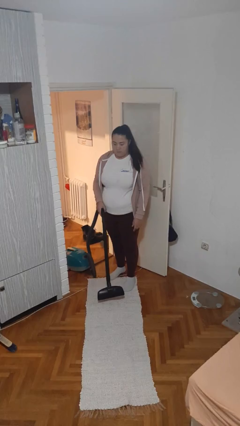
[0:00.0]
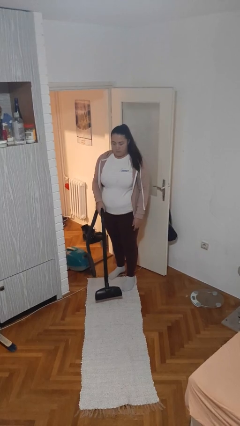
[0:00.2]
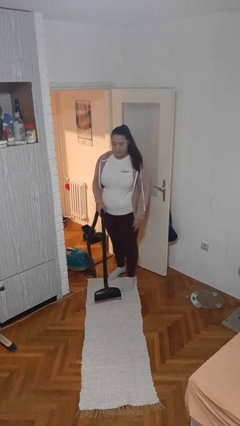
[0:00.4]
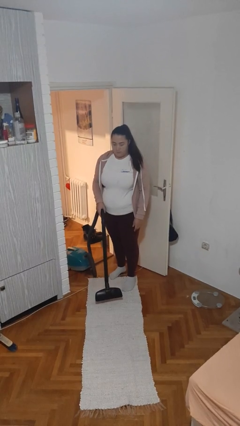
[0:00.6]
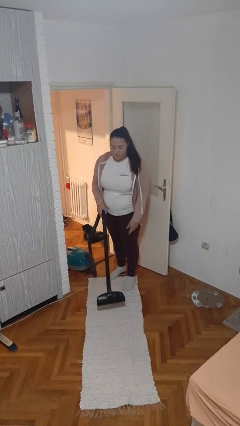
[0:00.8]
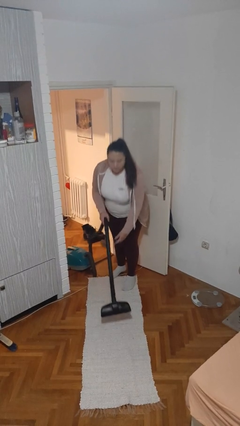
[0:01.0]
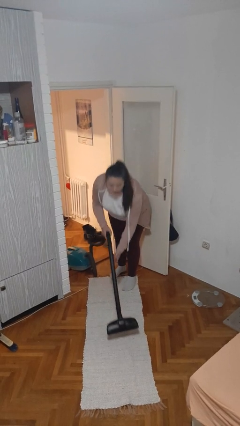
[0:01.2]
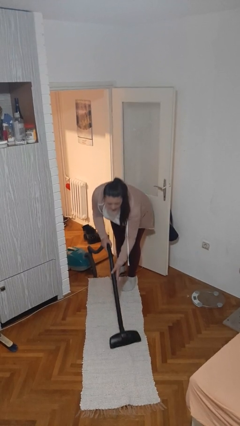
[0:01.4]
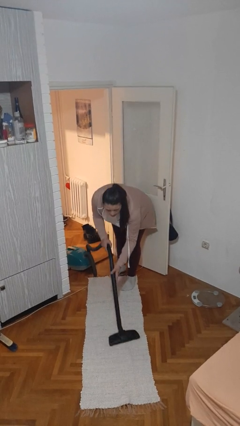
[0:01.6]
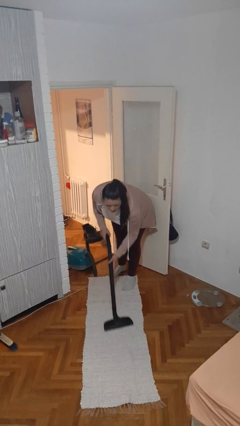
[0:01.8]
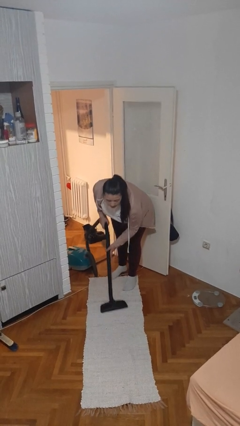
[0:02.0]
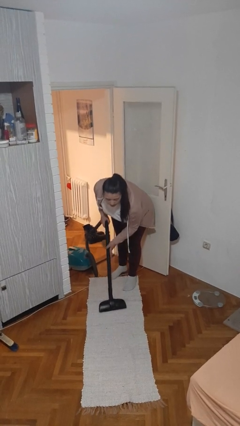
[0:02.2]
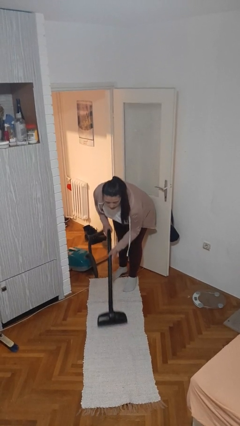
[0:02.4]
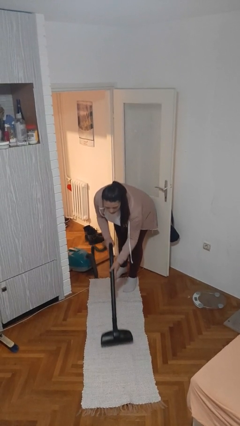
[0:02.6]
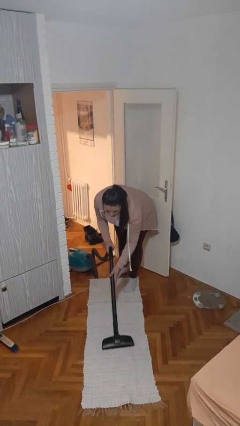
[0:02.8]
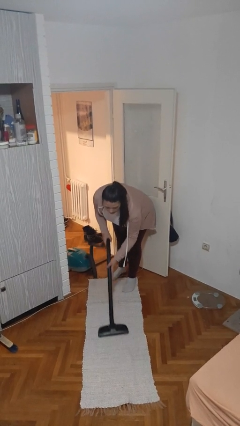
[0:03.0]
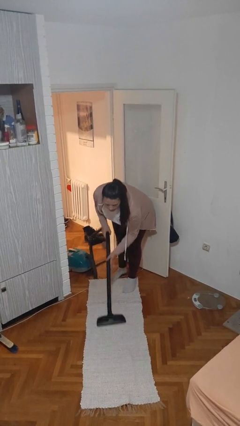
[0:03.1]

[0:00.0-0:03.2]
person vacuums carpet

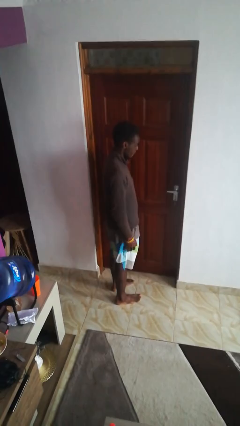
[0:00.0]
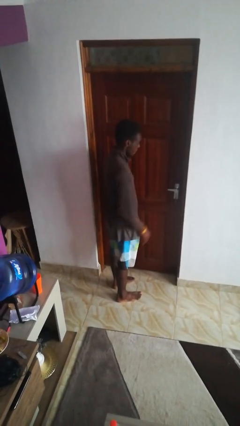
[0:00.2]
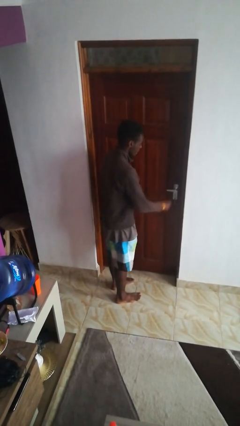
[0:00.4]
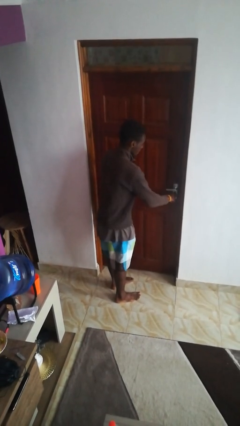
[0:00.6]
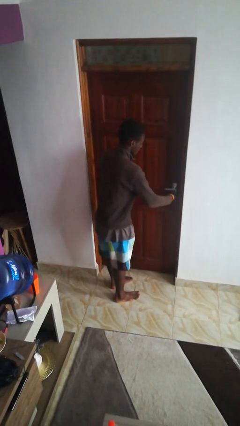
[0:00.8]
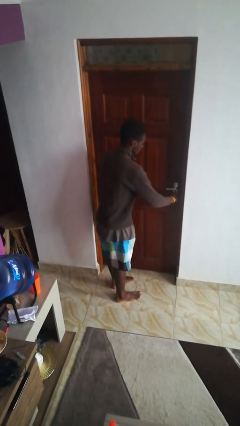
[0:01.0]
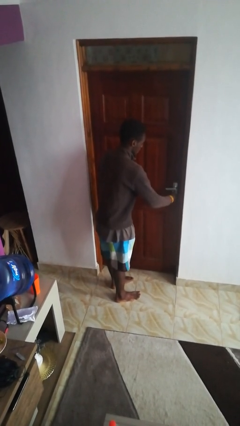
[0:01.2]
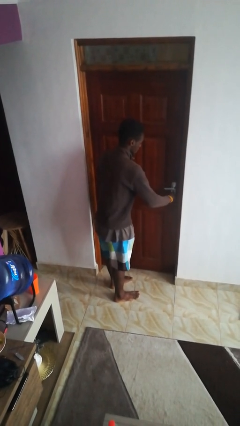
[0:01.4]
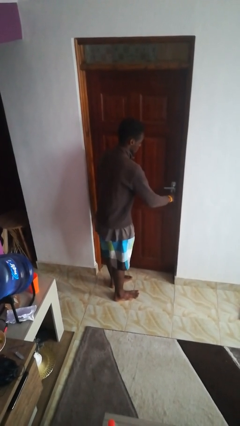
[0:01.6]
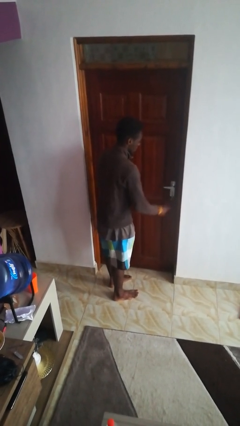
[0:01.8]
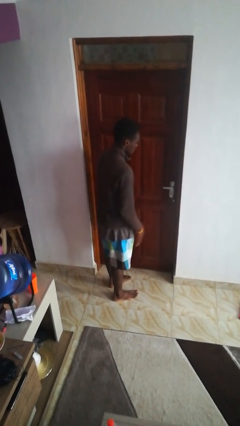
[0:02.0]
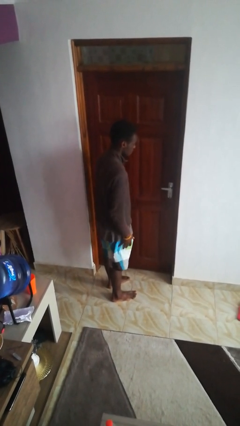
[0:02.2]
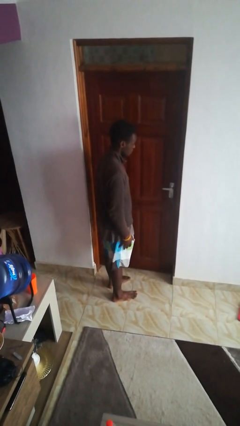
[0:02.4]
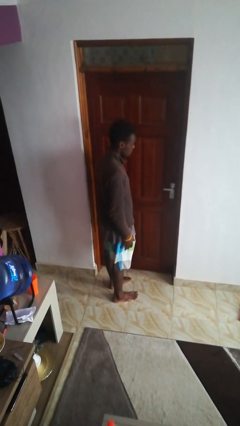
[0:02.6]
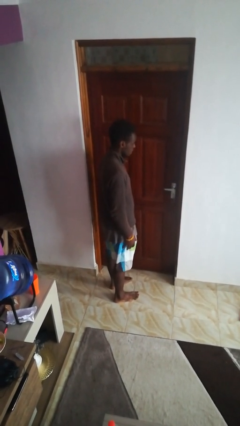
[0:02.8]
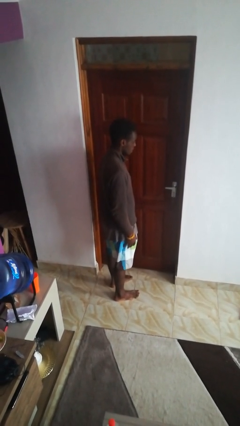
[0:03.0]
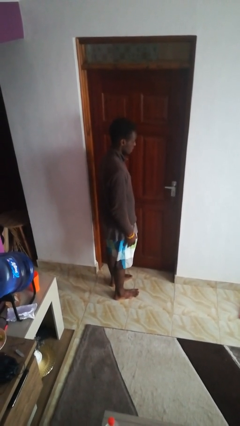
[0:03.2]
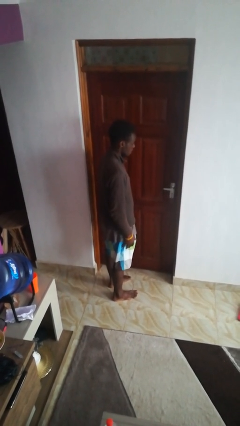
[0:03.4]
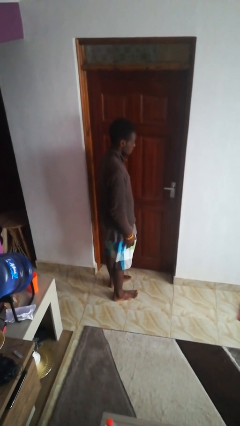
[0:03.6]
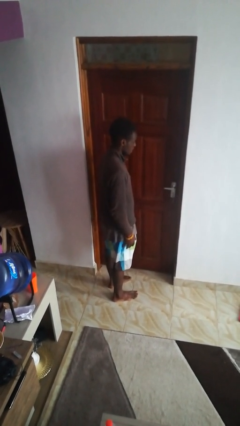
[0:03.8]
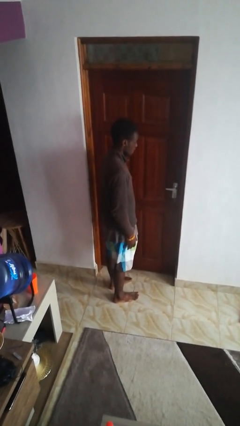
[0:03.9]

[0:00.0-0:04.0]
person unlocks door with keys

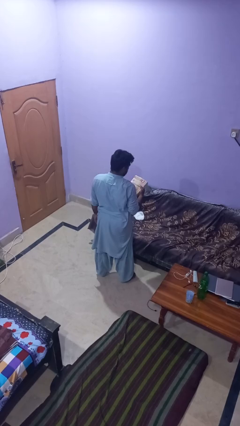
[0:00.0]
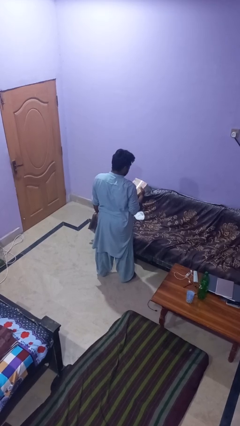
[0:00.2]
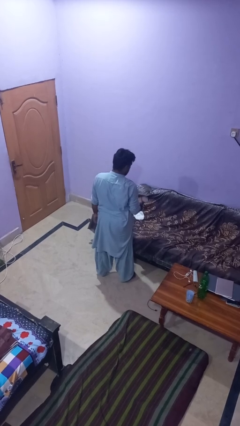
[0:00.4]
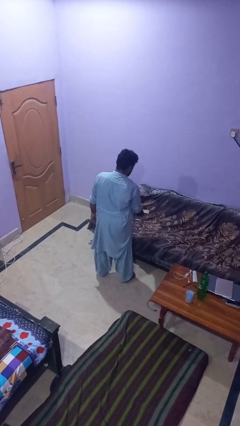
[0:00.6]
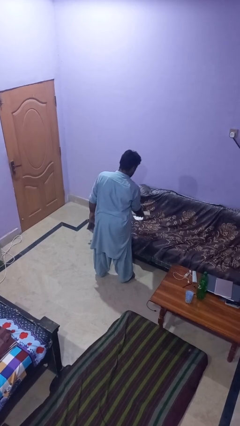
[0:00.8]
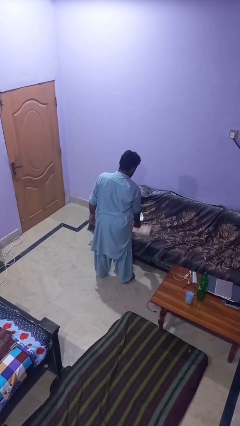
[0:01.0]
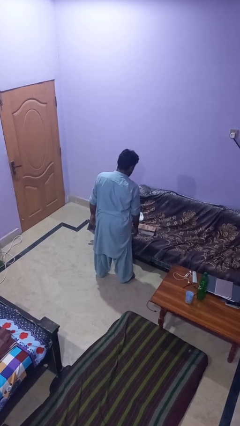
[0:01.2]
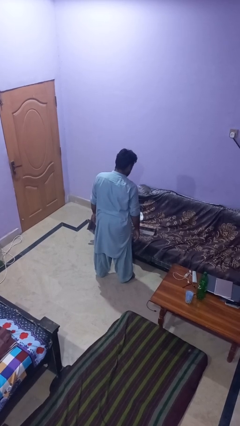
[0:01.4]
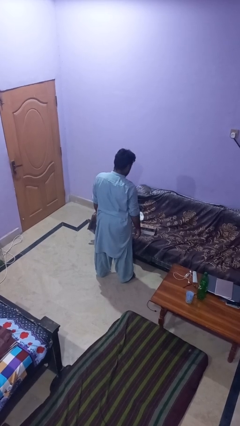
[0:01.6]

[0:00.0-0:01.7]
person puts down object on couch

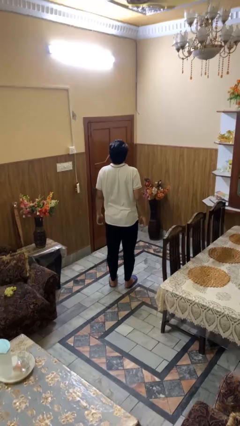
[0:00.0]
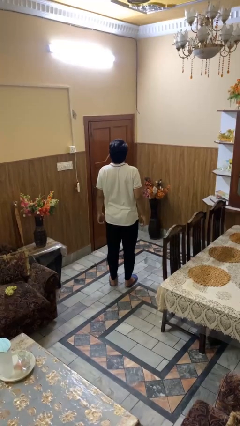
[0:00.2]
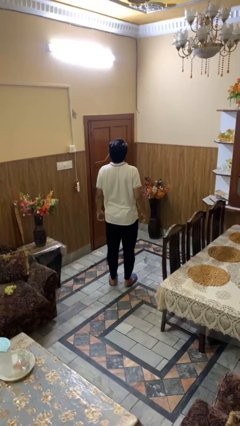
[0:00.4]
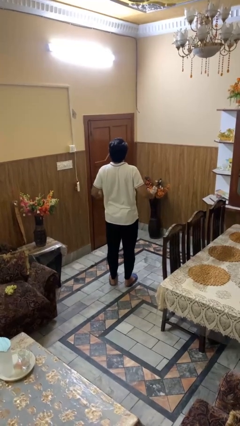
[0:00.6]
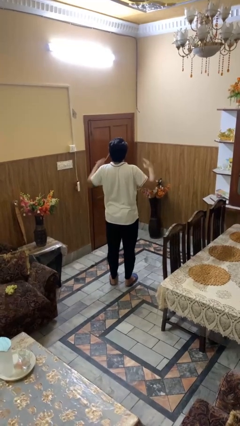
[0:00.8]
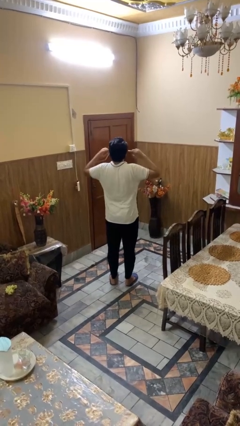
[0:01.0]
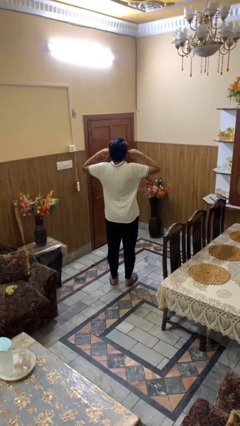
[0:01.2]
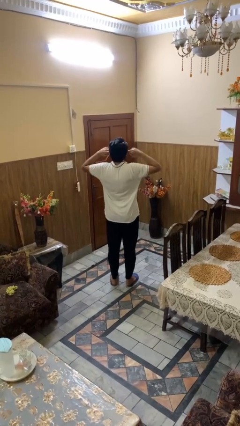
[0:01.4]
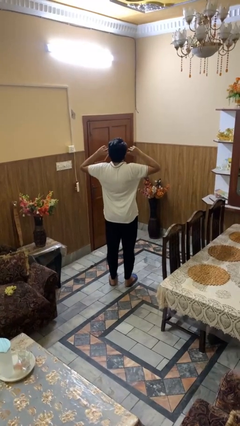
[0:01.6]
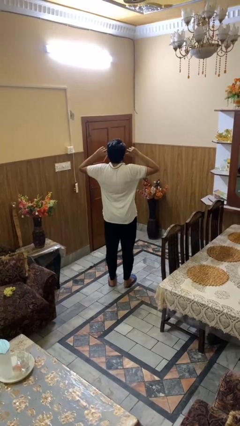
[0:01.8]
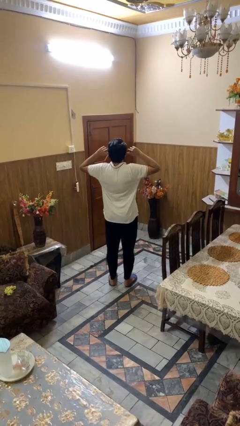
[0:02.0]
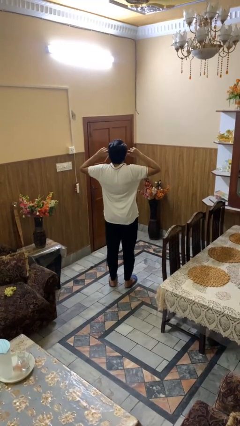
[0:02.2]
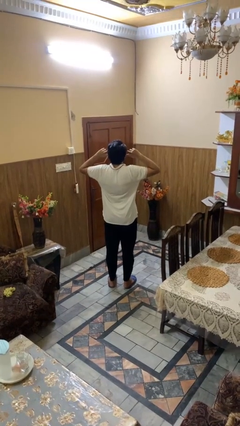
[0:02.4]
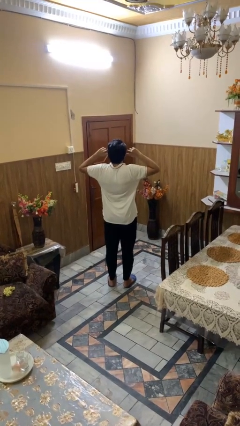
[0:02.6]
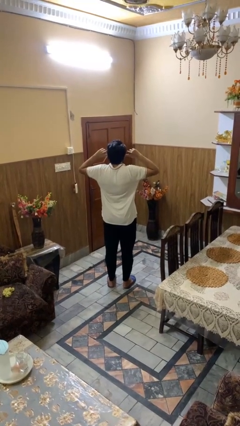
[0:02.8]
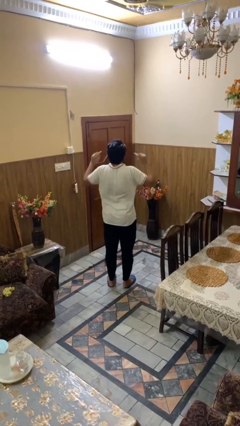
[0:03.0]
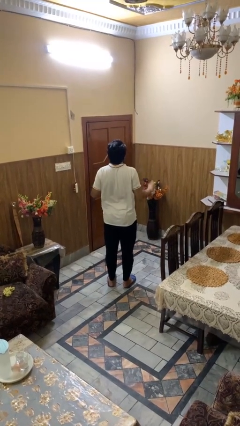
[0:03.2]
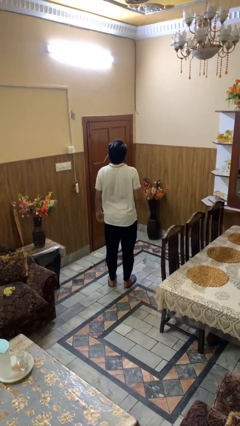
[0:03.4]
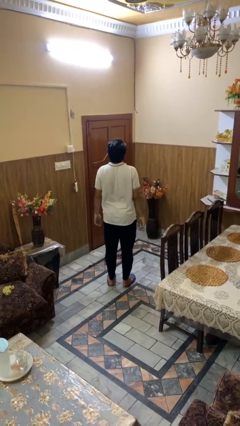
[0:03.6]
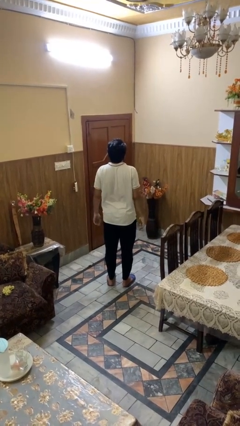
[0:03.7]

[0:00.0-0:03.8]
person puts fingers in ear

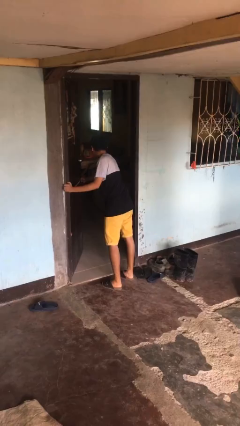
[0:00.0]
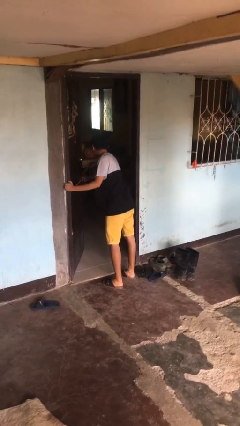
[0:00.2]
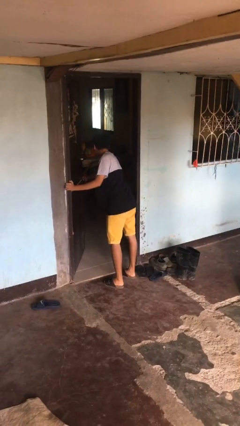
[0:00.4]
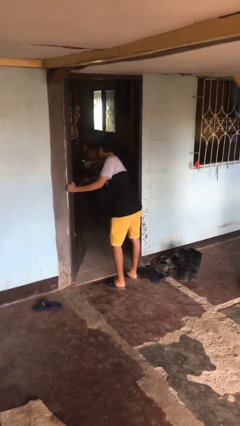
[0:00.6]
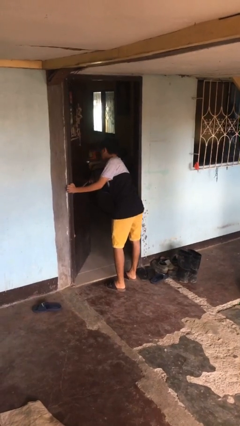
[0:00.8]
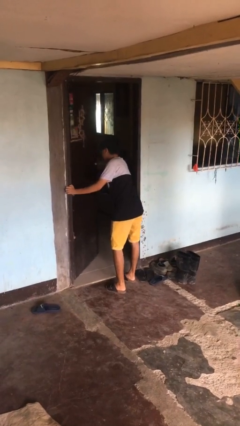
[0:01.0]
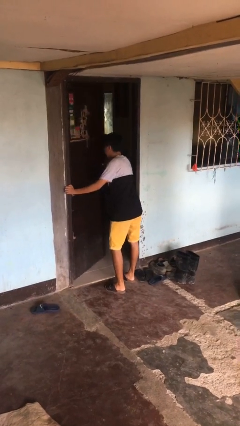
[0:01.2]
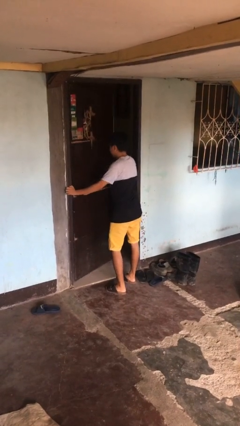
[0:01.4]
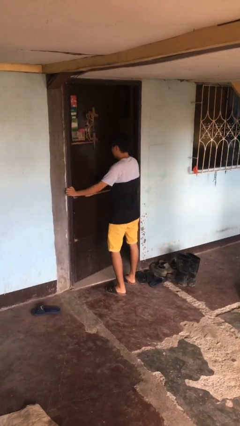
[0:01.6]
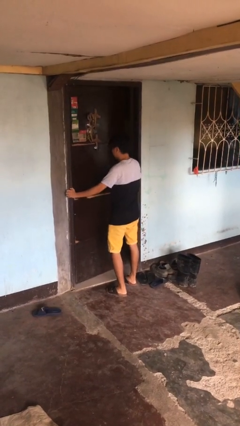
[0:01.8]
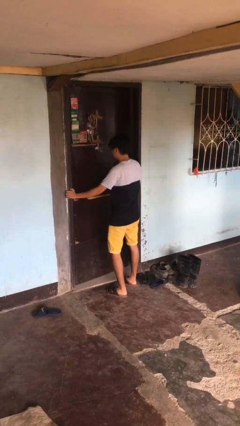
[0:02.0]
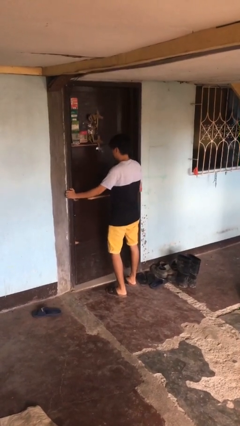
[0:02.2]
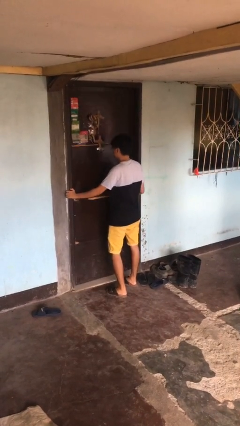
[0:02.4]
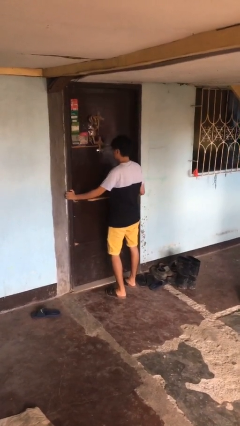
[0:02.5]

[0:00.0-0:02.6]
person closes facility door

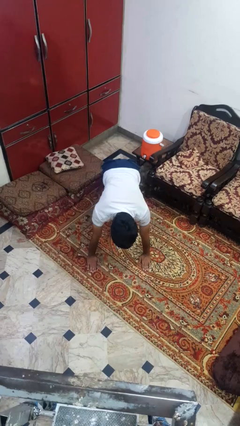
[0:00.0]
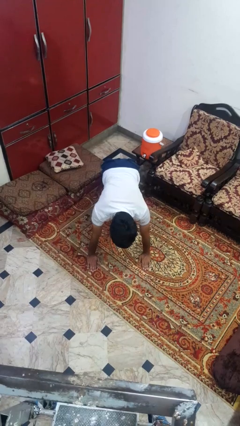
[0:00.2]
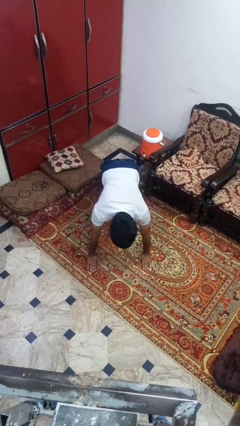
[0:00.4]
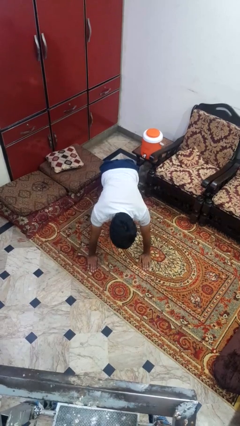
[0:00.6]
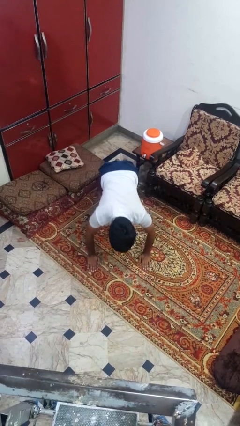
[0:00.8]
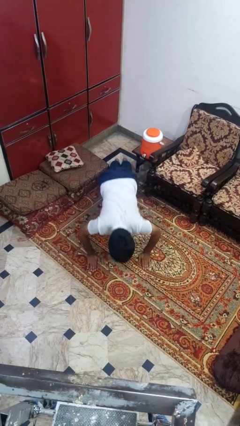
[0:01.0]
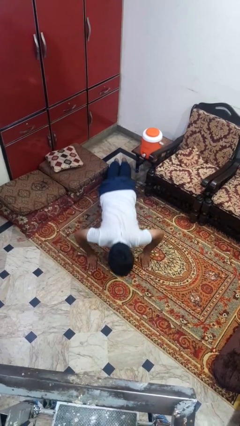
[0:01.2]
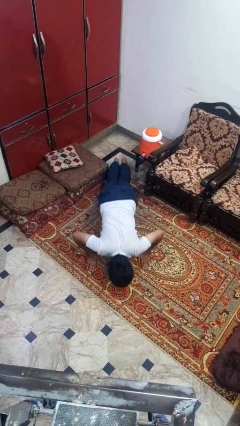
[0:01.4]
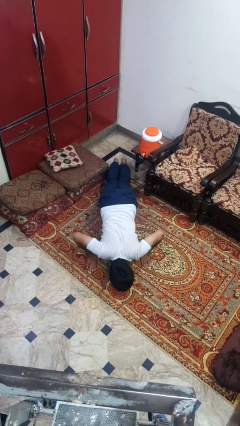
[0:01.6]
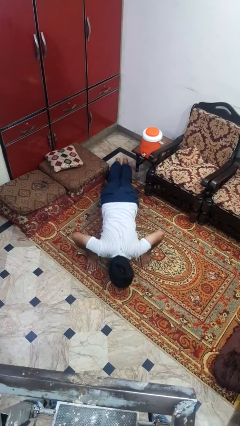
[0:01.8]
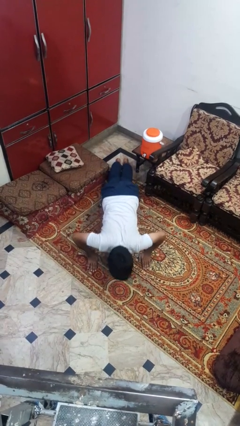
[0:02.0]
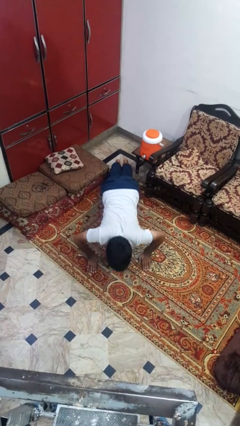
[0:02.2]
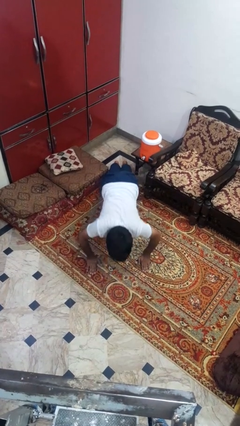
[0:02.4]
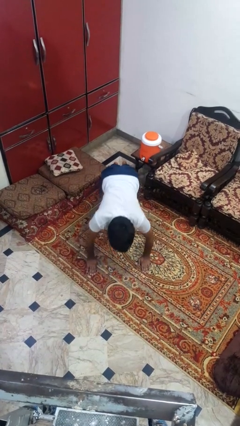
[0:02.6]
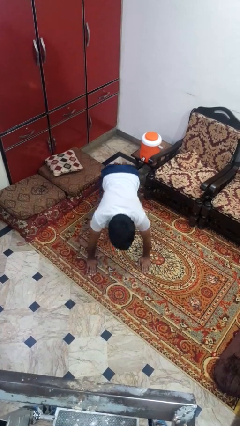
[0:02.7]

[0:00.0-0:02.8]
person exercises with pushup
